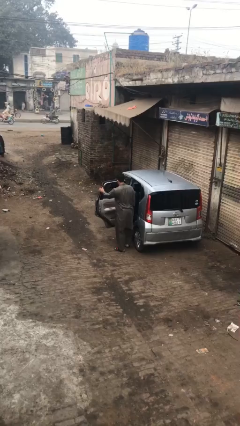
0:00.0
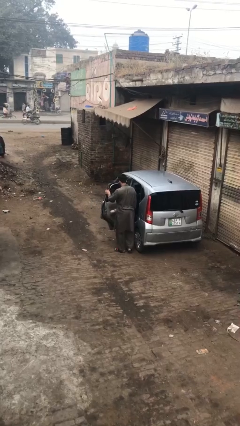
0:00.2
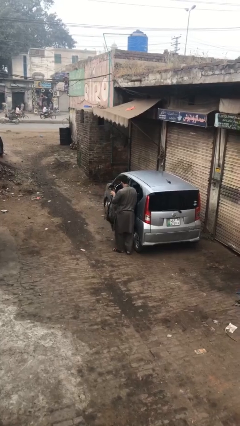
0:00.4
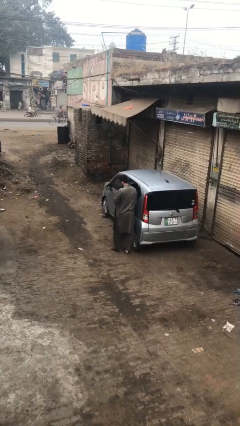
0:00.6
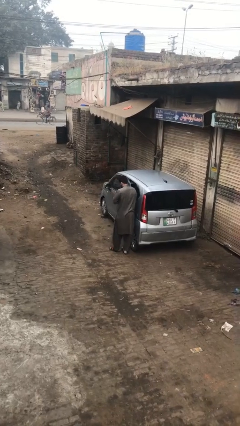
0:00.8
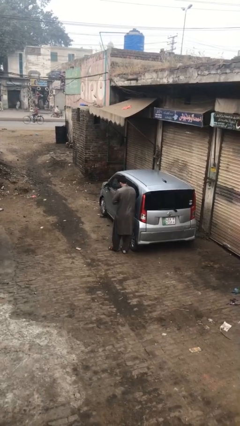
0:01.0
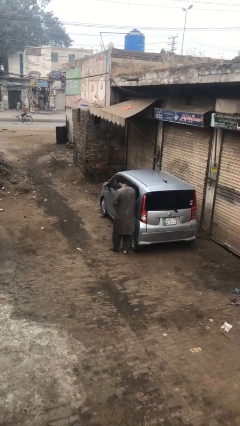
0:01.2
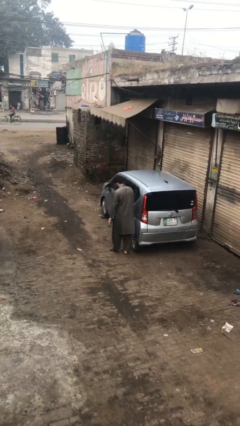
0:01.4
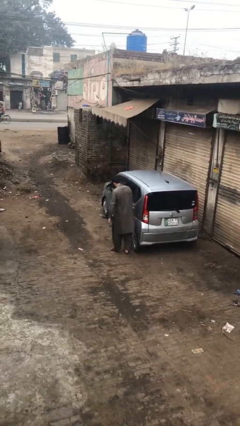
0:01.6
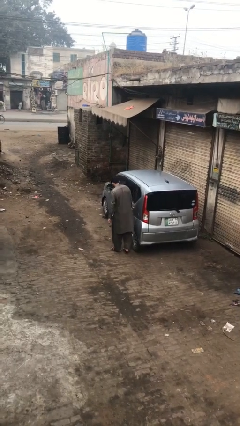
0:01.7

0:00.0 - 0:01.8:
person closes car door

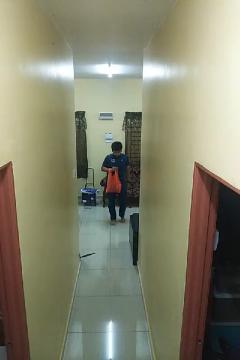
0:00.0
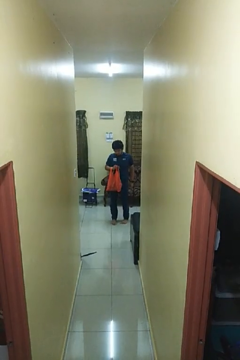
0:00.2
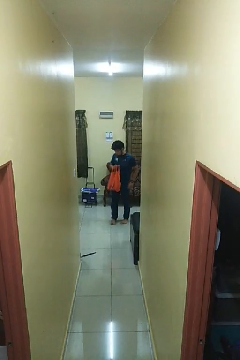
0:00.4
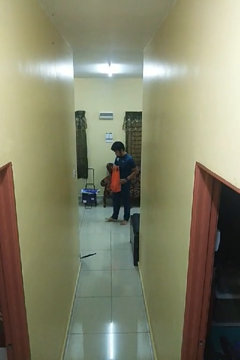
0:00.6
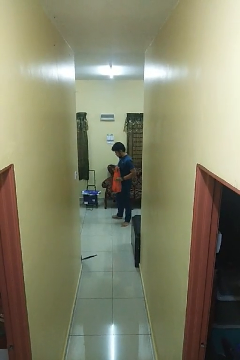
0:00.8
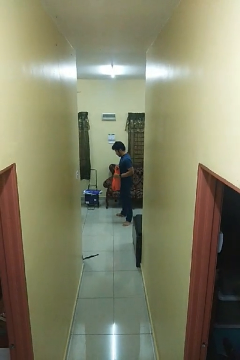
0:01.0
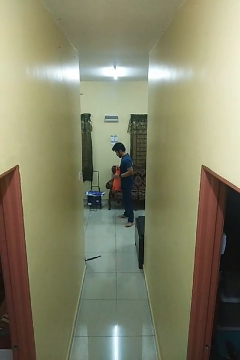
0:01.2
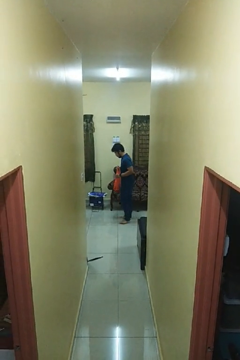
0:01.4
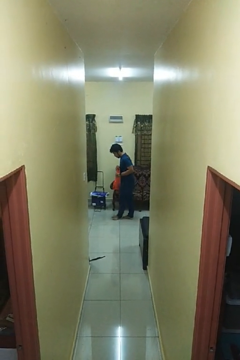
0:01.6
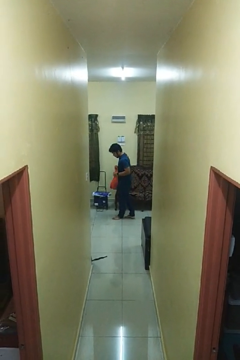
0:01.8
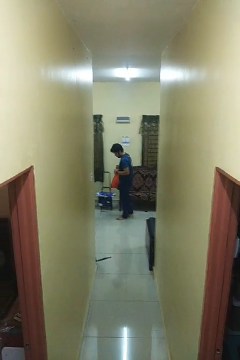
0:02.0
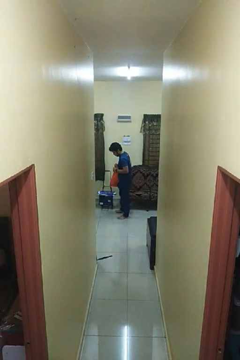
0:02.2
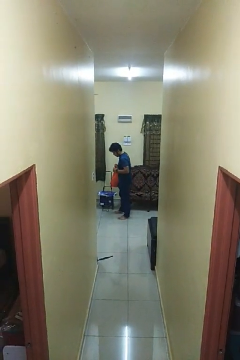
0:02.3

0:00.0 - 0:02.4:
person carries groceries

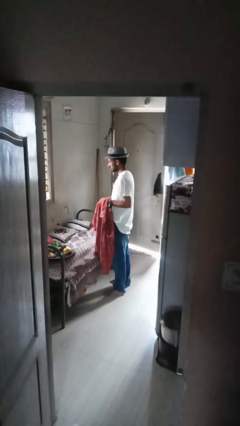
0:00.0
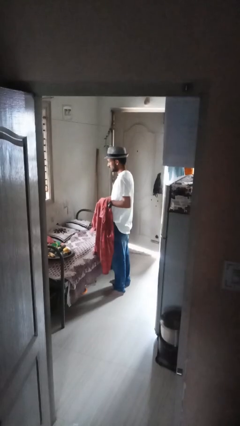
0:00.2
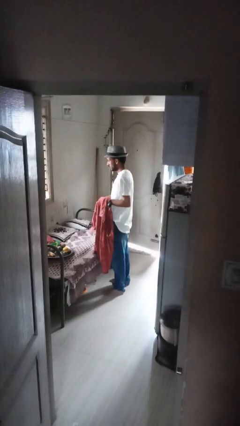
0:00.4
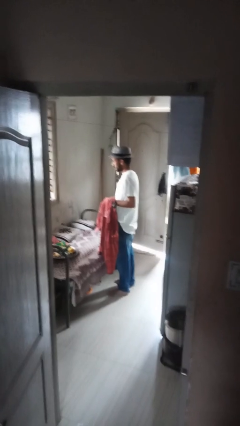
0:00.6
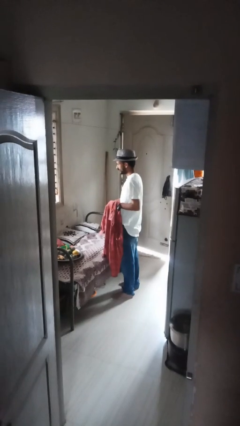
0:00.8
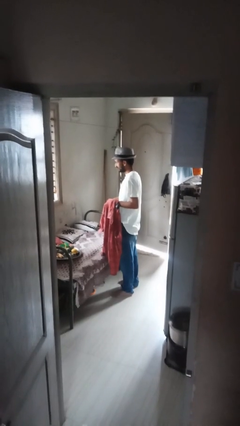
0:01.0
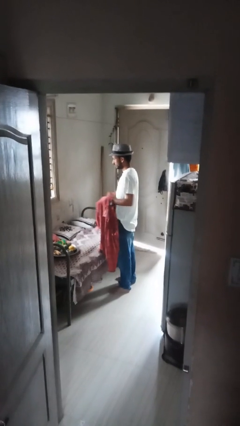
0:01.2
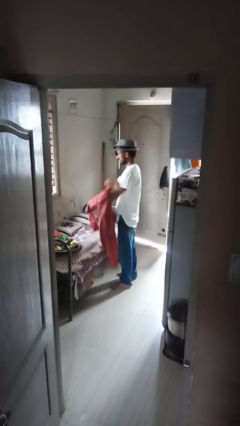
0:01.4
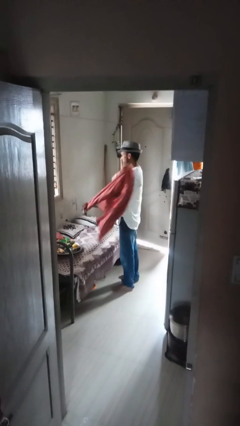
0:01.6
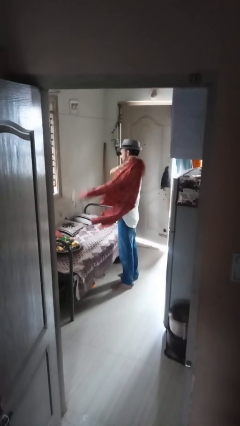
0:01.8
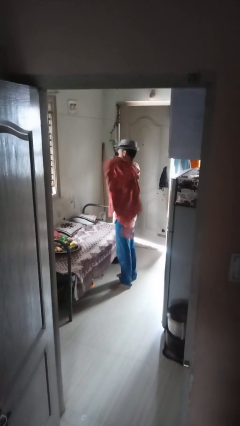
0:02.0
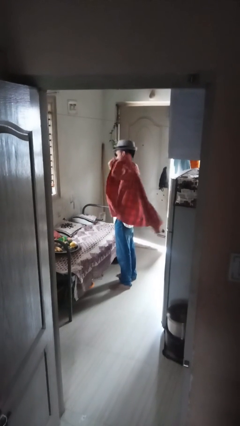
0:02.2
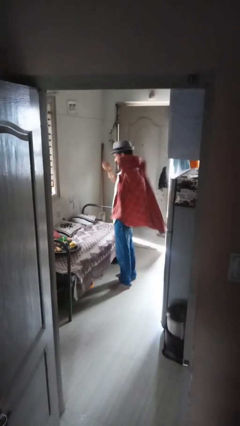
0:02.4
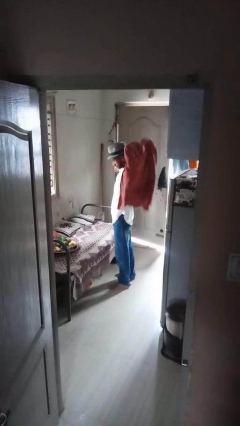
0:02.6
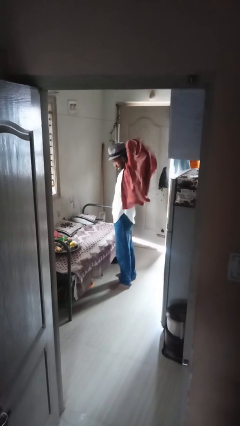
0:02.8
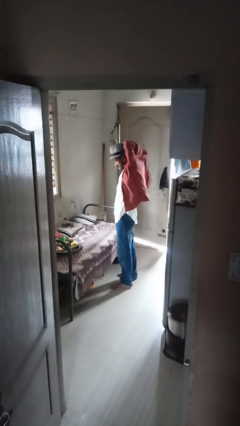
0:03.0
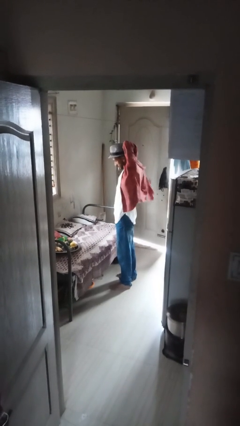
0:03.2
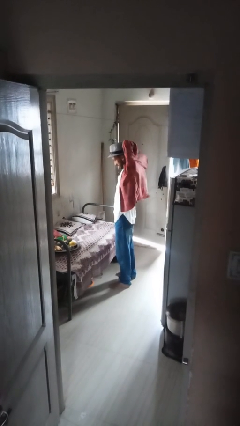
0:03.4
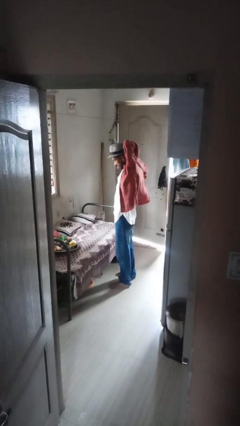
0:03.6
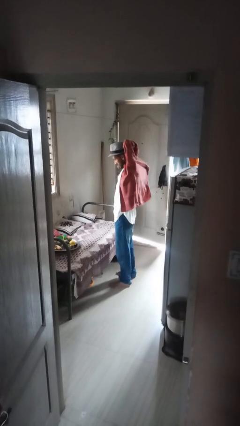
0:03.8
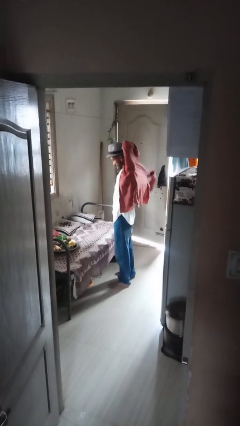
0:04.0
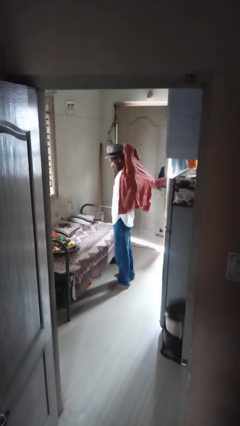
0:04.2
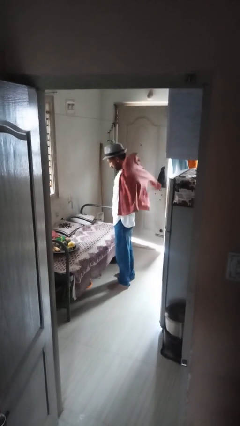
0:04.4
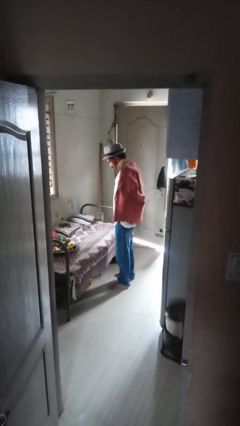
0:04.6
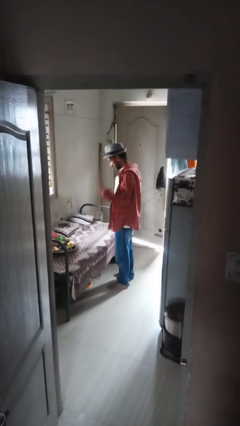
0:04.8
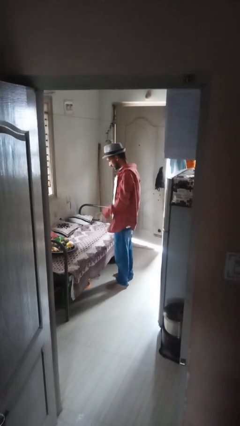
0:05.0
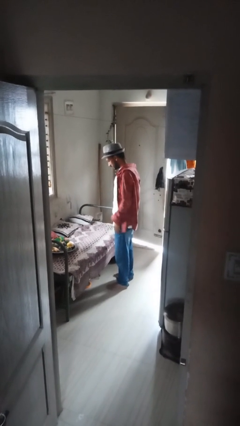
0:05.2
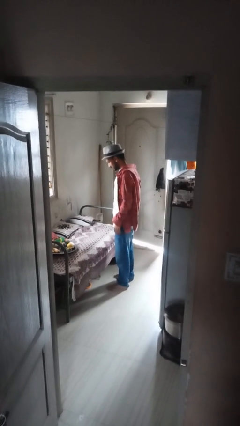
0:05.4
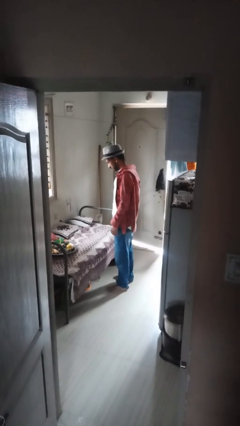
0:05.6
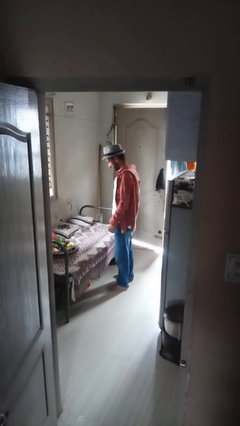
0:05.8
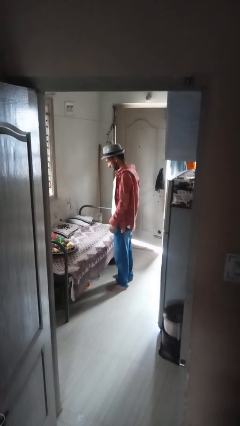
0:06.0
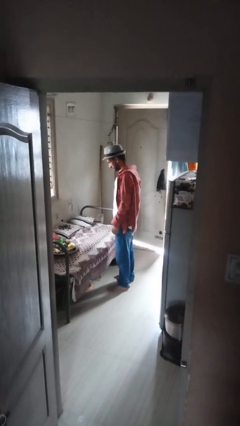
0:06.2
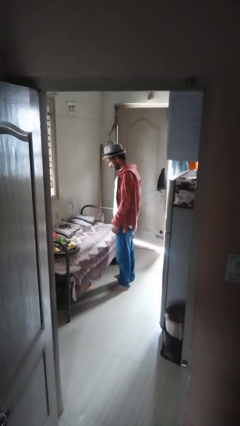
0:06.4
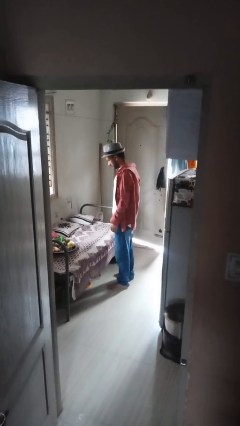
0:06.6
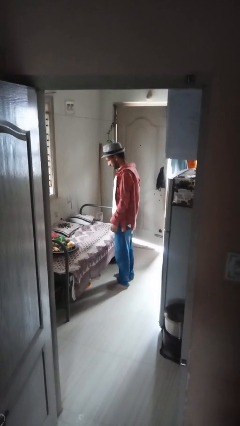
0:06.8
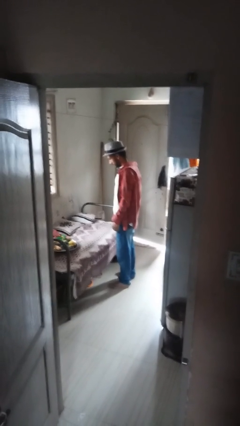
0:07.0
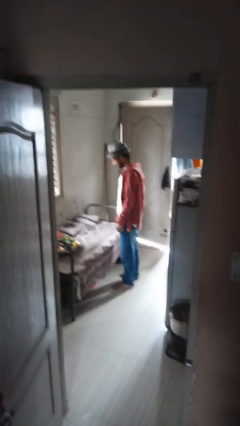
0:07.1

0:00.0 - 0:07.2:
person puts on shirt

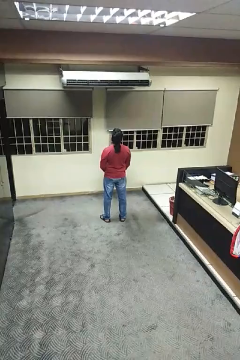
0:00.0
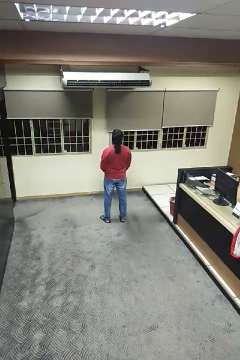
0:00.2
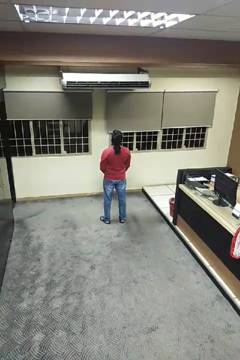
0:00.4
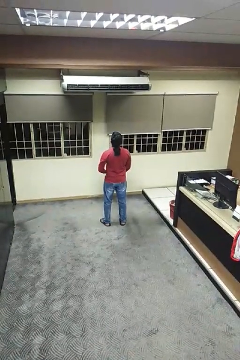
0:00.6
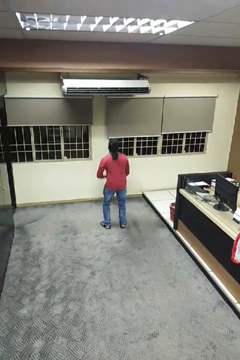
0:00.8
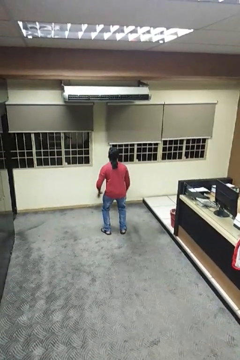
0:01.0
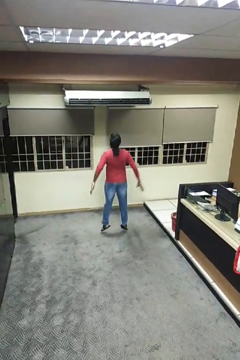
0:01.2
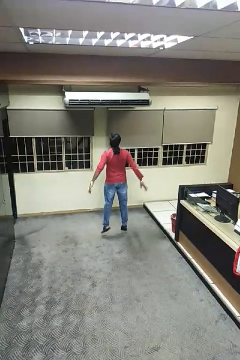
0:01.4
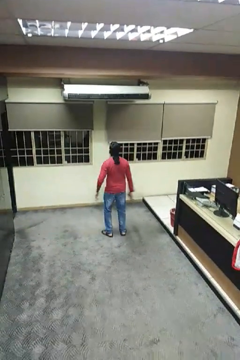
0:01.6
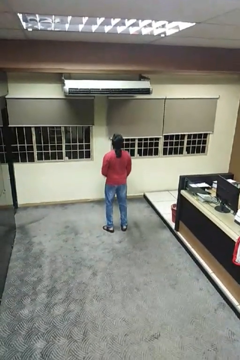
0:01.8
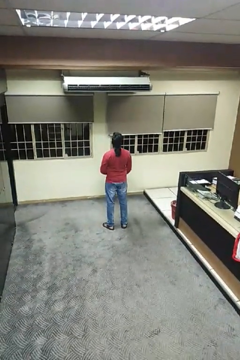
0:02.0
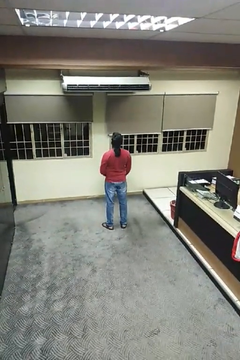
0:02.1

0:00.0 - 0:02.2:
person jumps

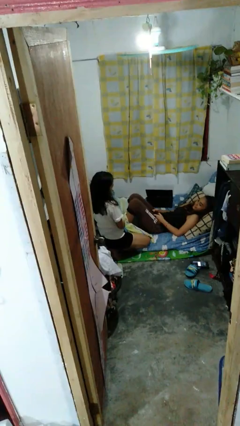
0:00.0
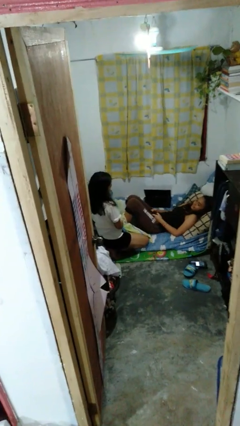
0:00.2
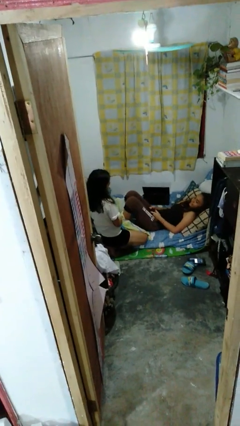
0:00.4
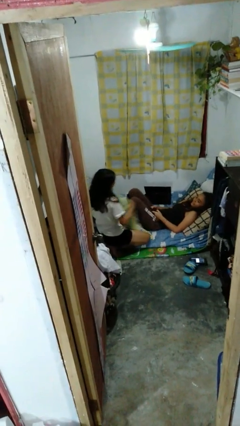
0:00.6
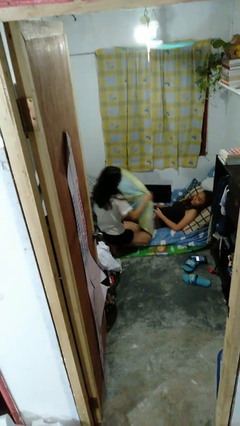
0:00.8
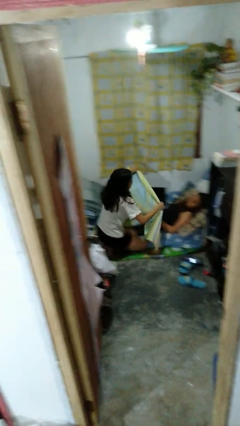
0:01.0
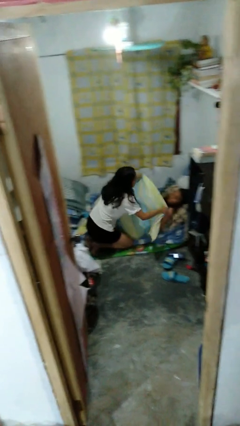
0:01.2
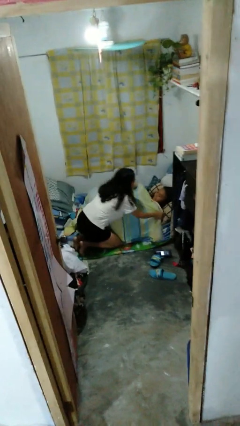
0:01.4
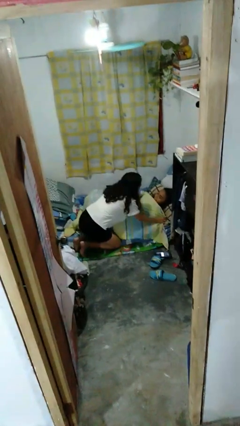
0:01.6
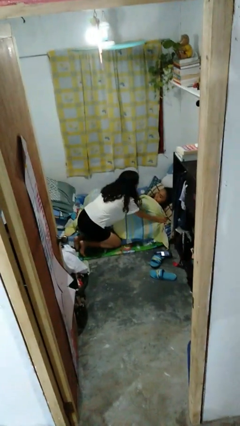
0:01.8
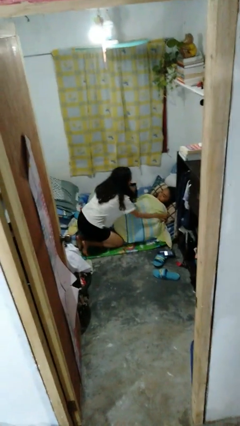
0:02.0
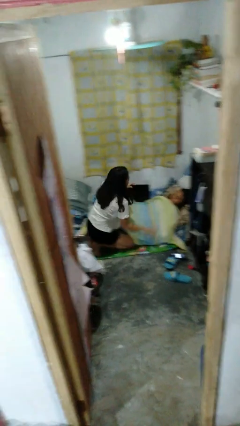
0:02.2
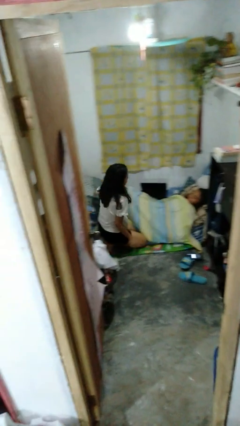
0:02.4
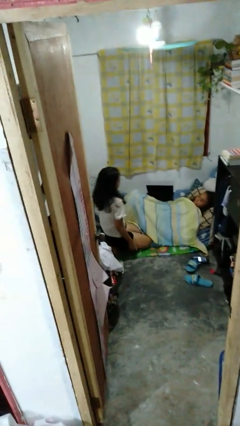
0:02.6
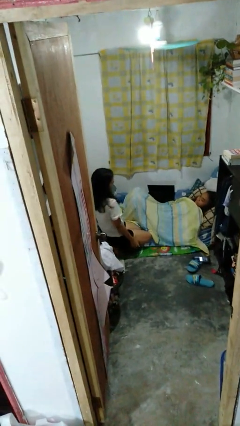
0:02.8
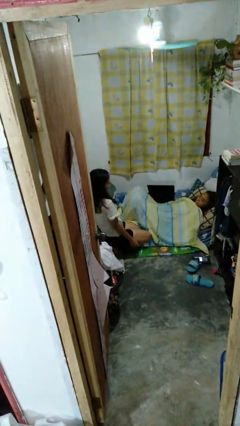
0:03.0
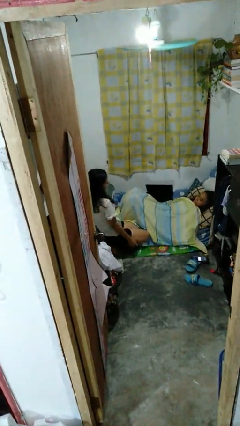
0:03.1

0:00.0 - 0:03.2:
person covers friend with blanket

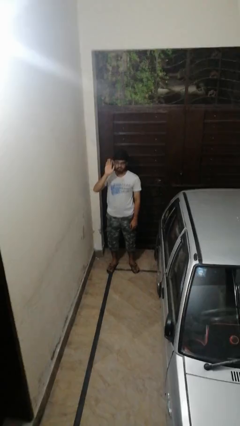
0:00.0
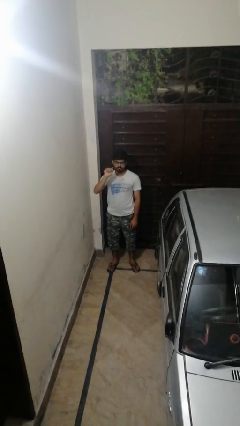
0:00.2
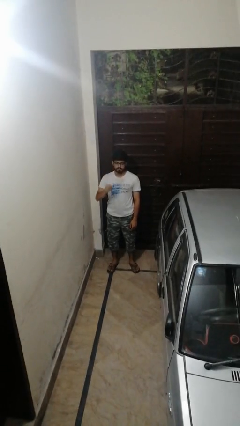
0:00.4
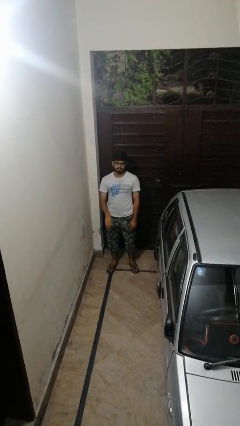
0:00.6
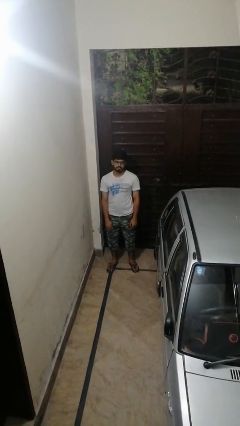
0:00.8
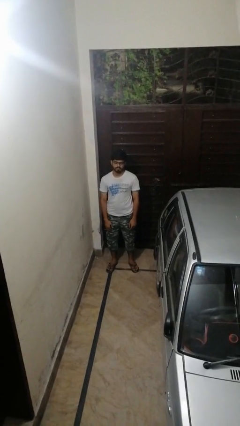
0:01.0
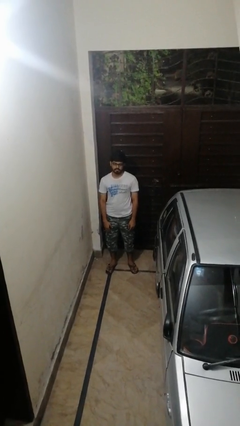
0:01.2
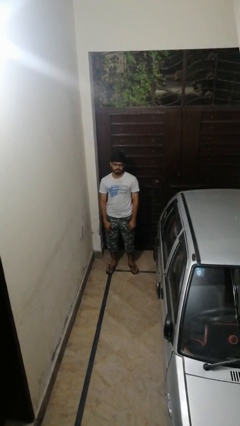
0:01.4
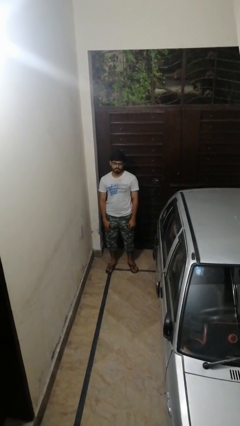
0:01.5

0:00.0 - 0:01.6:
person gestures lower hand
